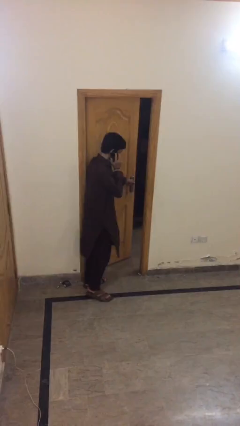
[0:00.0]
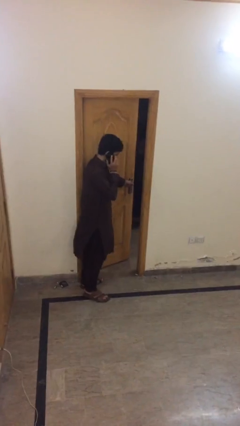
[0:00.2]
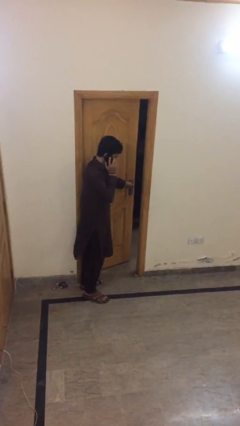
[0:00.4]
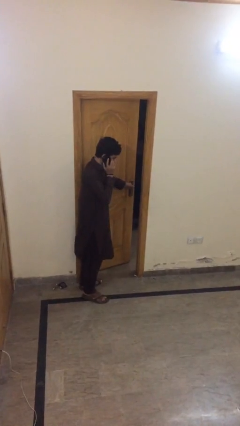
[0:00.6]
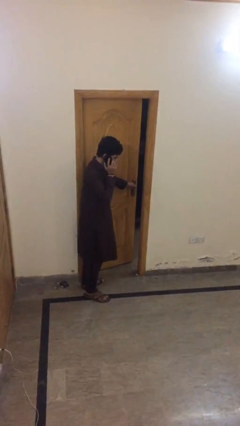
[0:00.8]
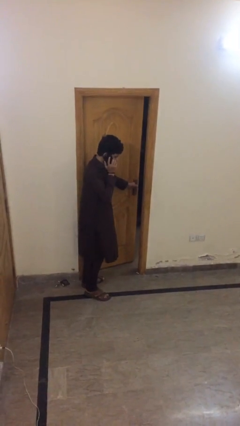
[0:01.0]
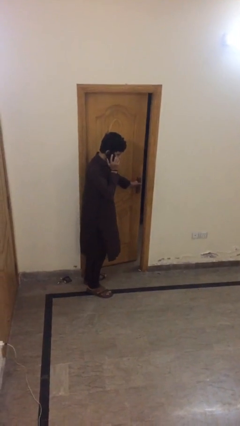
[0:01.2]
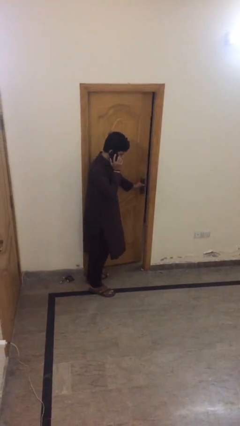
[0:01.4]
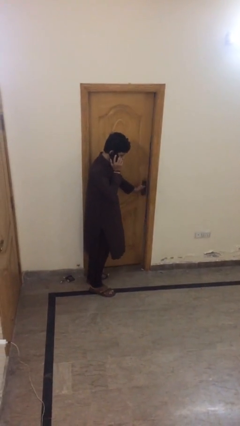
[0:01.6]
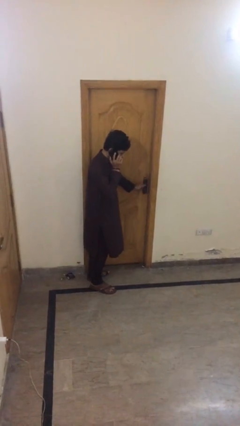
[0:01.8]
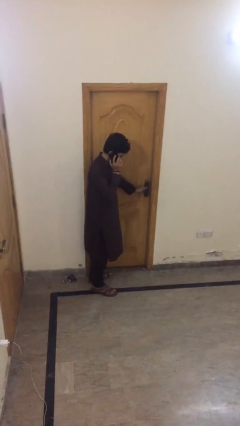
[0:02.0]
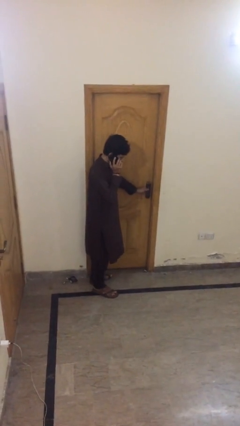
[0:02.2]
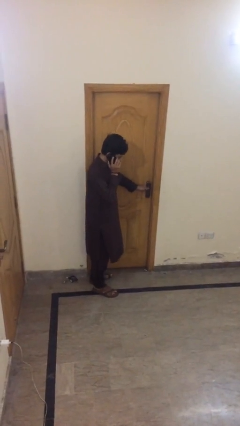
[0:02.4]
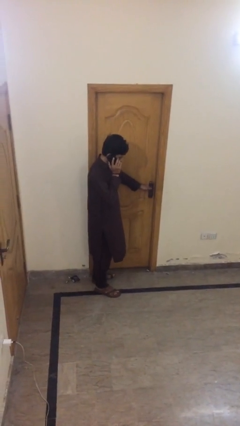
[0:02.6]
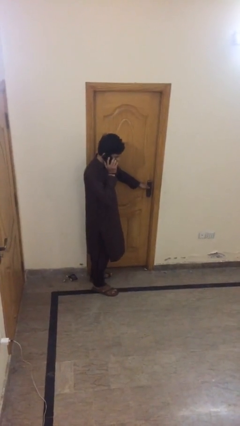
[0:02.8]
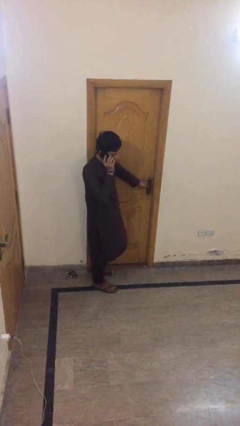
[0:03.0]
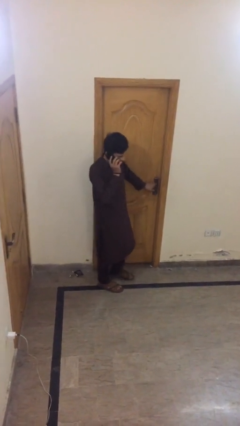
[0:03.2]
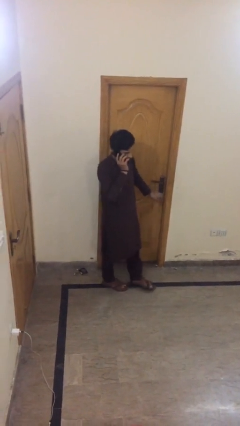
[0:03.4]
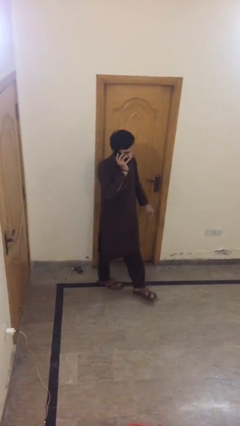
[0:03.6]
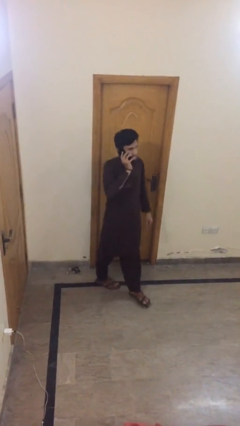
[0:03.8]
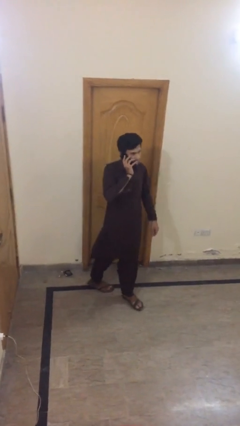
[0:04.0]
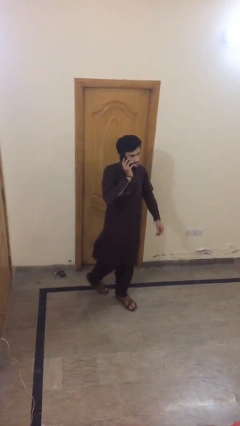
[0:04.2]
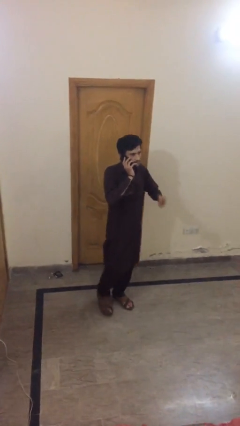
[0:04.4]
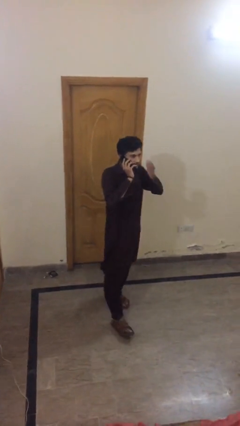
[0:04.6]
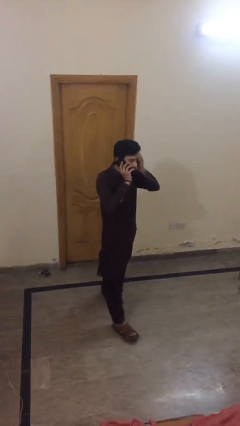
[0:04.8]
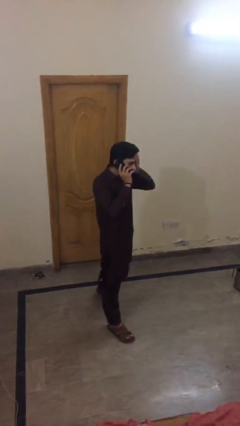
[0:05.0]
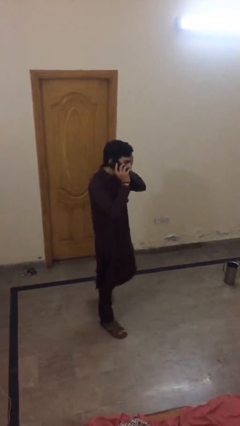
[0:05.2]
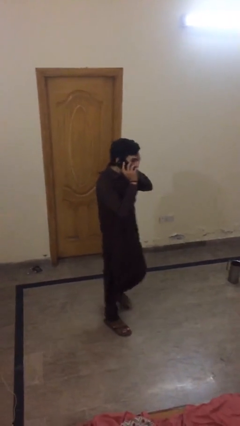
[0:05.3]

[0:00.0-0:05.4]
person closes facility door

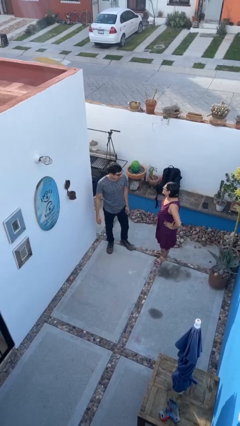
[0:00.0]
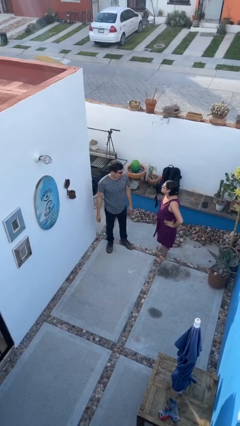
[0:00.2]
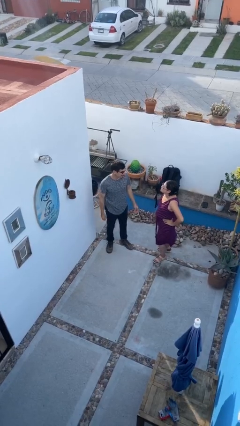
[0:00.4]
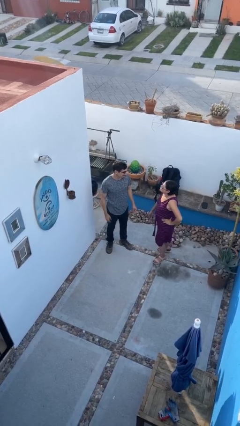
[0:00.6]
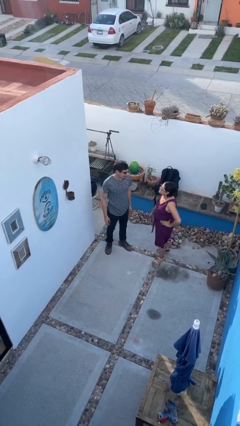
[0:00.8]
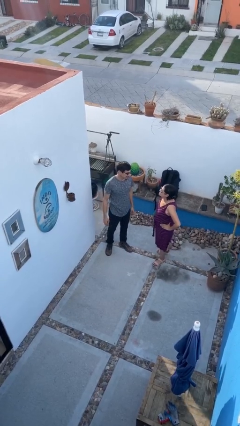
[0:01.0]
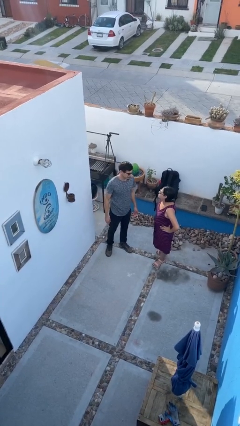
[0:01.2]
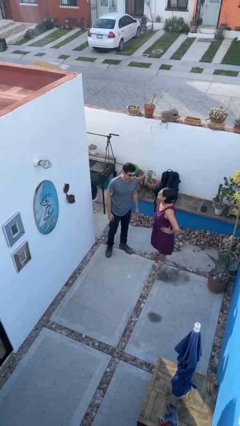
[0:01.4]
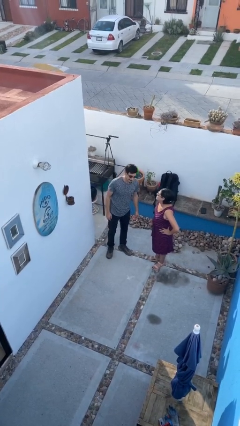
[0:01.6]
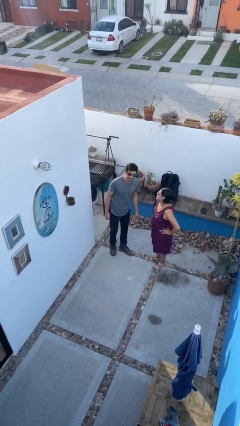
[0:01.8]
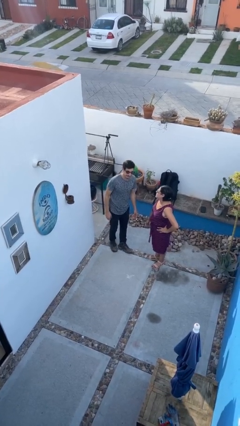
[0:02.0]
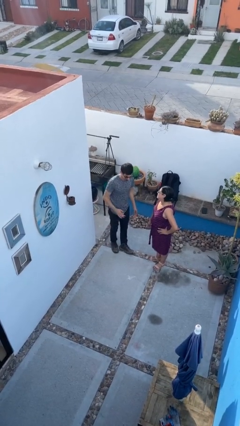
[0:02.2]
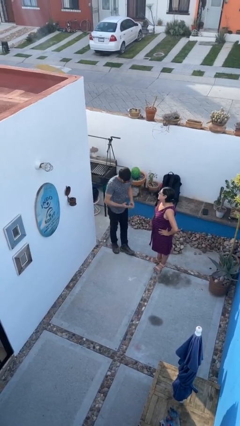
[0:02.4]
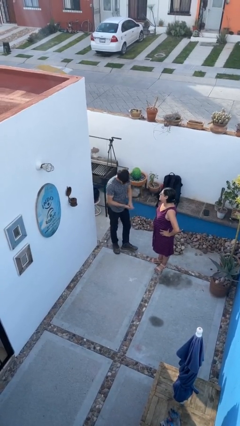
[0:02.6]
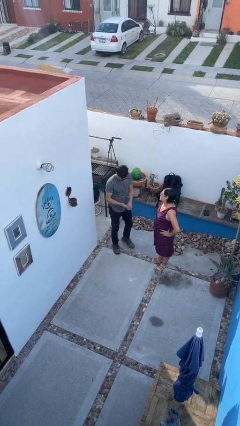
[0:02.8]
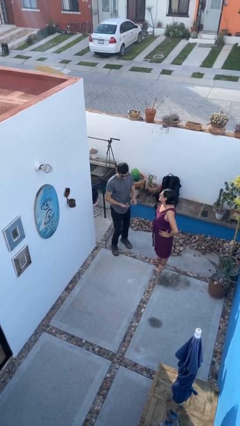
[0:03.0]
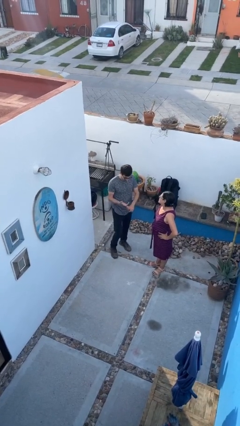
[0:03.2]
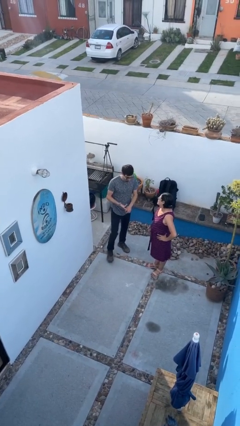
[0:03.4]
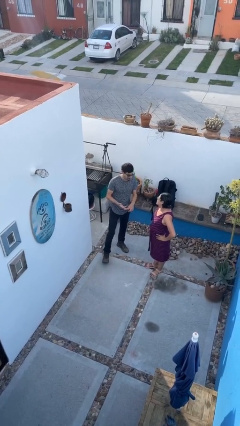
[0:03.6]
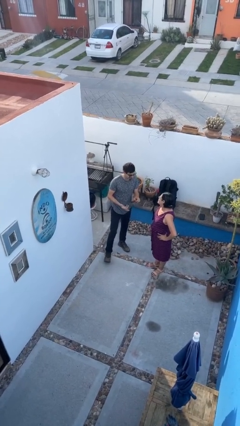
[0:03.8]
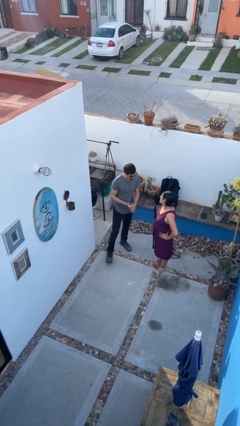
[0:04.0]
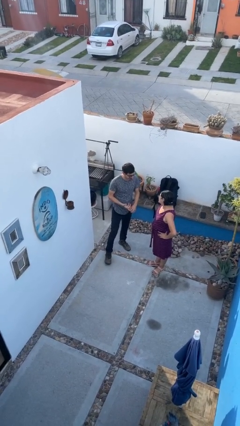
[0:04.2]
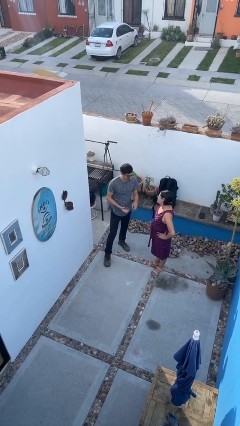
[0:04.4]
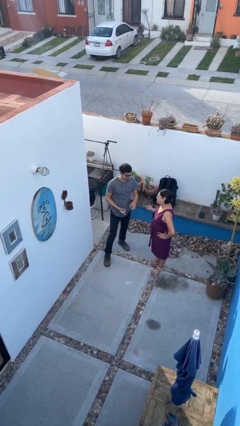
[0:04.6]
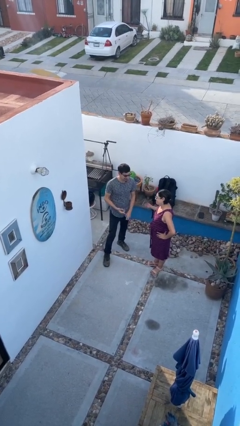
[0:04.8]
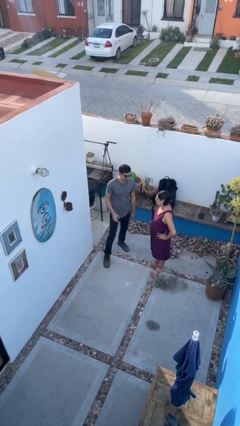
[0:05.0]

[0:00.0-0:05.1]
person talks to person

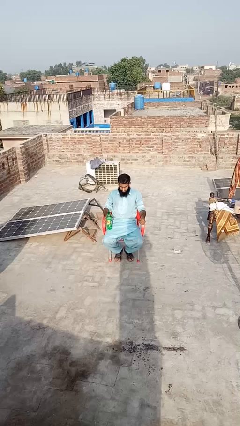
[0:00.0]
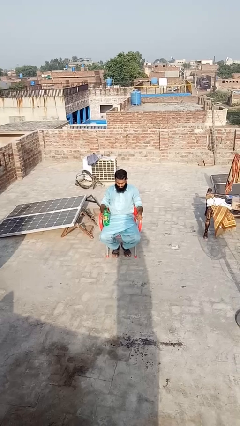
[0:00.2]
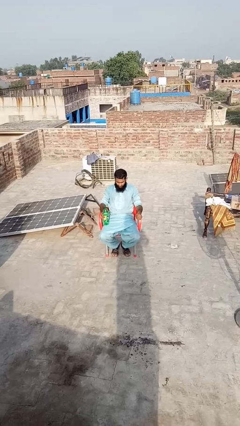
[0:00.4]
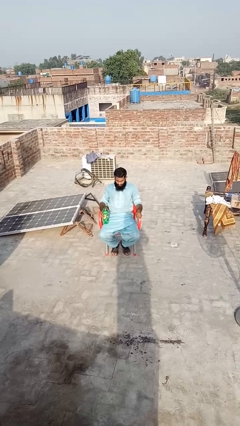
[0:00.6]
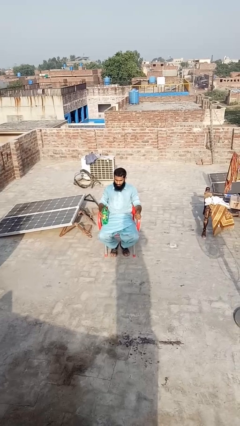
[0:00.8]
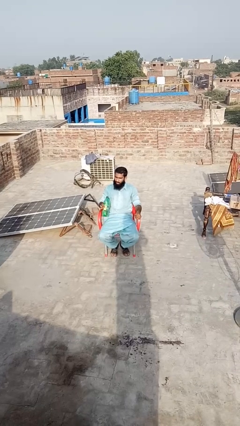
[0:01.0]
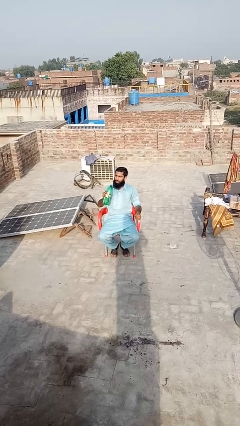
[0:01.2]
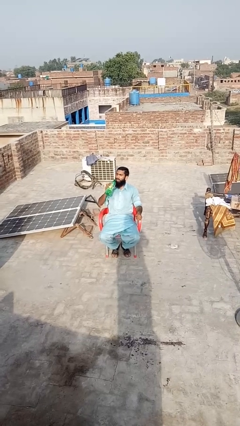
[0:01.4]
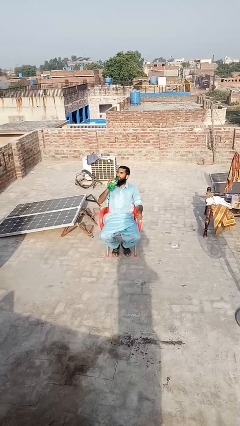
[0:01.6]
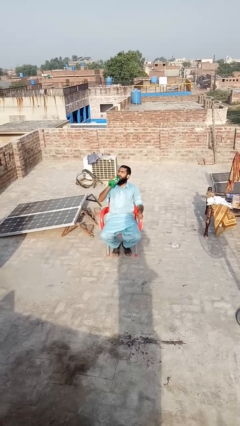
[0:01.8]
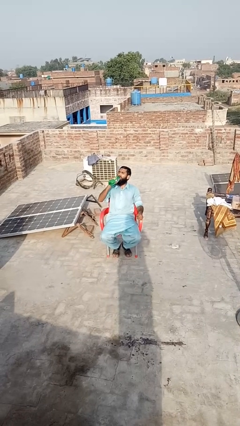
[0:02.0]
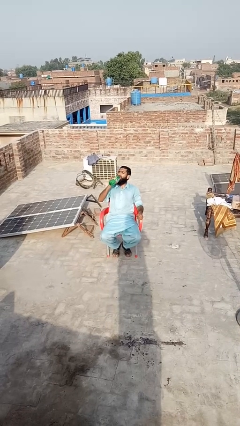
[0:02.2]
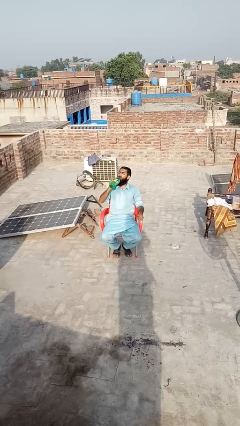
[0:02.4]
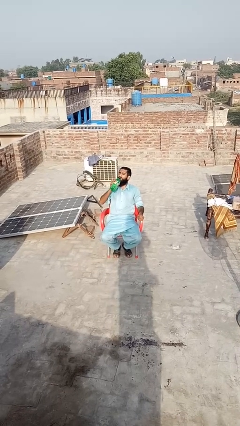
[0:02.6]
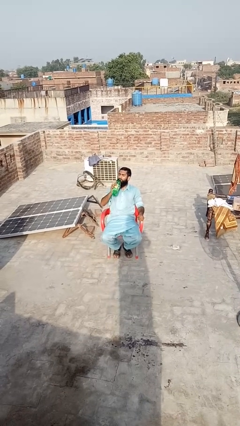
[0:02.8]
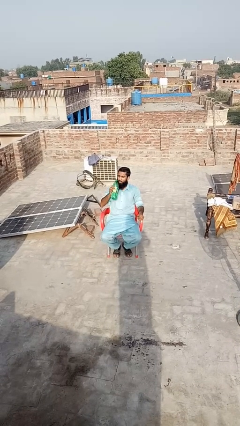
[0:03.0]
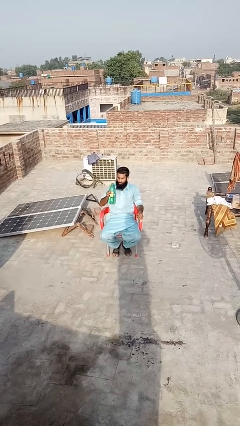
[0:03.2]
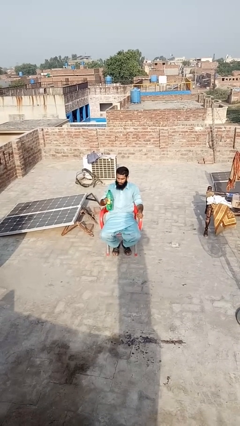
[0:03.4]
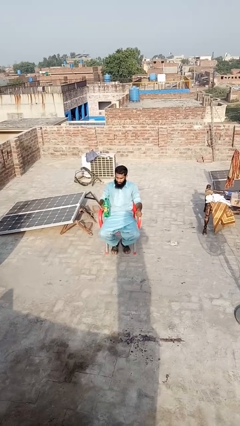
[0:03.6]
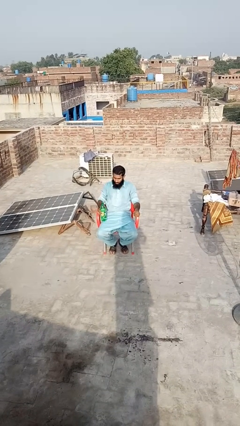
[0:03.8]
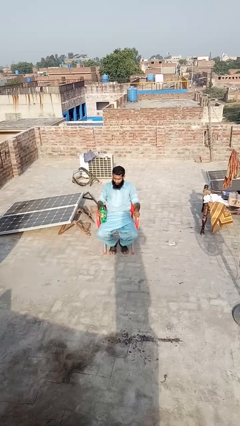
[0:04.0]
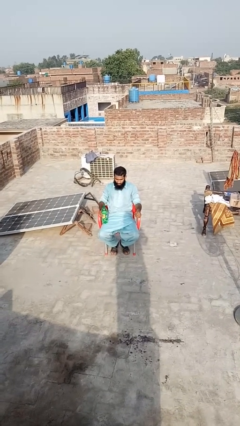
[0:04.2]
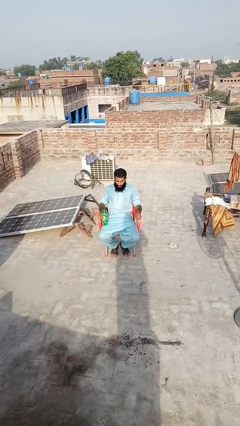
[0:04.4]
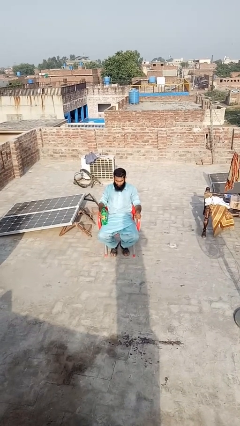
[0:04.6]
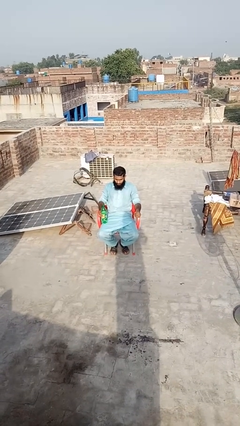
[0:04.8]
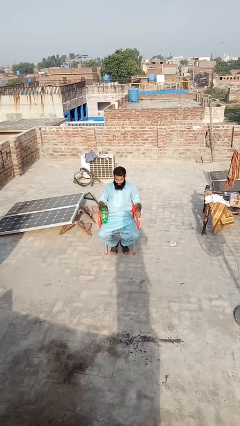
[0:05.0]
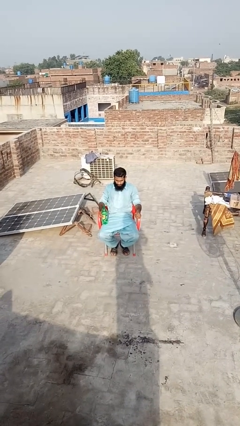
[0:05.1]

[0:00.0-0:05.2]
person drinks from bottle

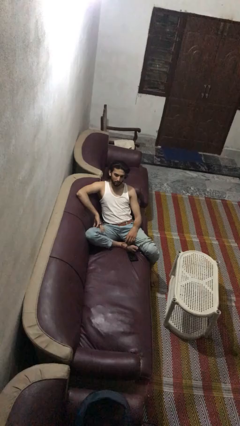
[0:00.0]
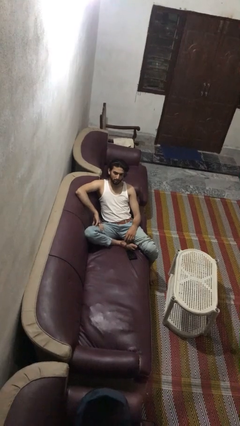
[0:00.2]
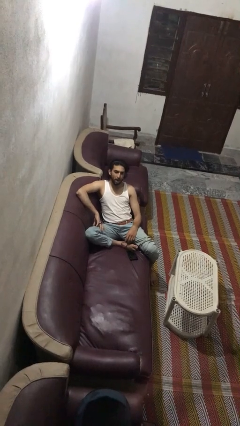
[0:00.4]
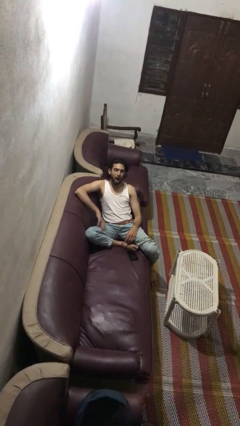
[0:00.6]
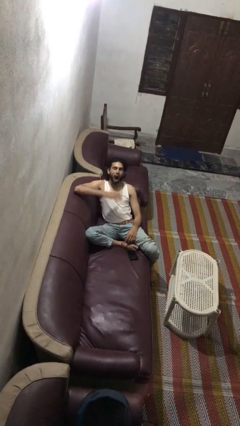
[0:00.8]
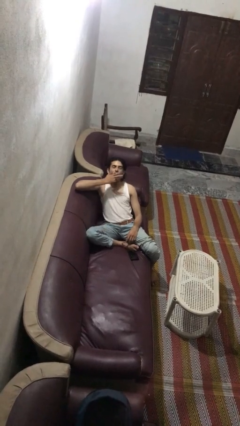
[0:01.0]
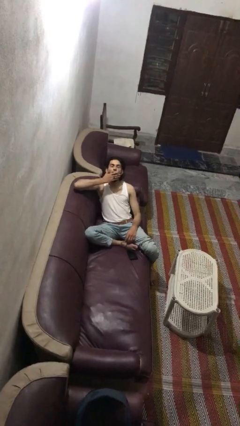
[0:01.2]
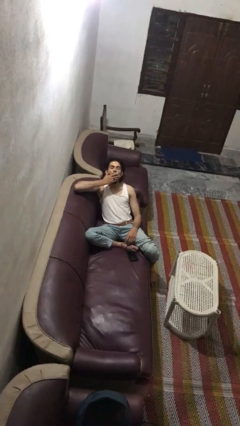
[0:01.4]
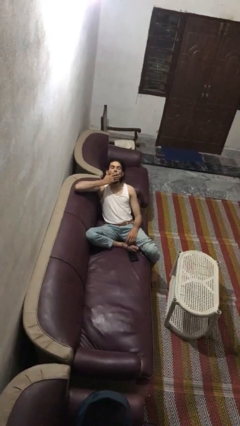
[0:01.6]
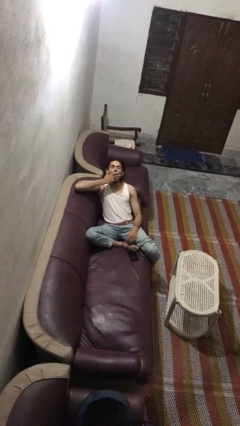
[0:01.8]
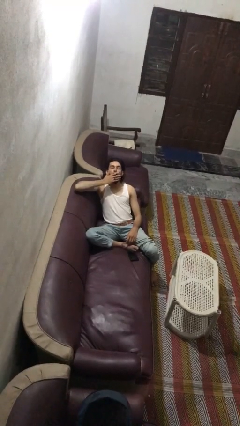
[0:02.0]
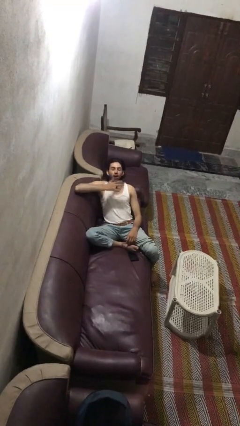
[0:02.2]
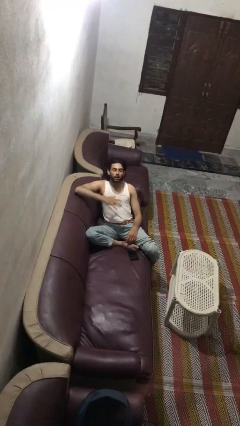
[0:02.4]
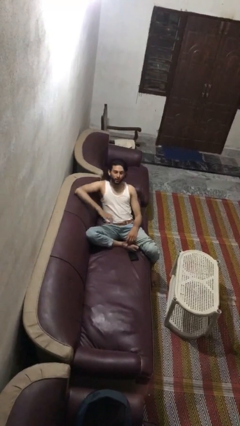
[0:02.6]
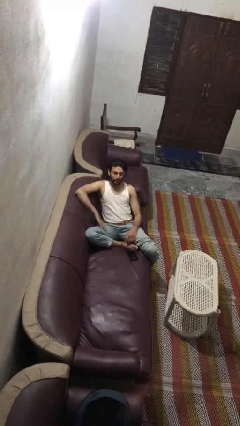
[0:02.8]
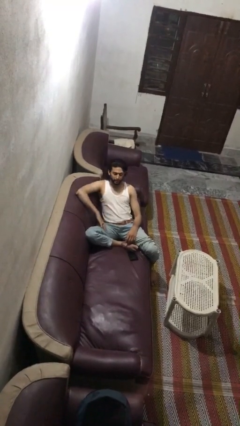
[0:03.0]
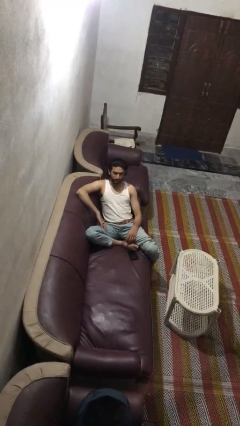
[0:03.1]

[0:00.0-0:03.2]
person yawns
